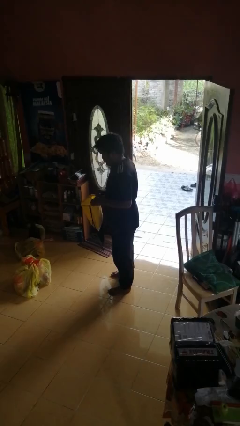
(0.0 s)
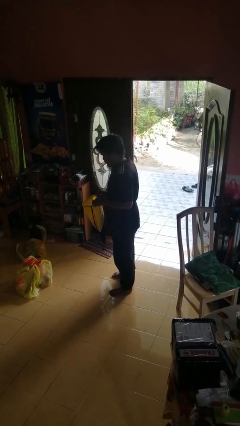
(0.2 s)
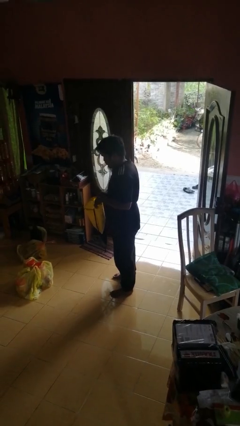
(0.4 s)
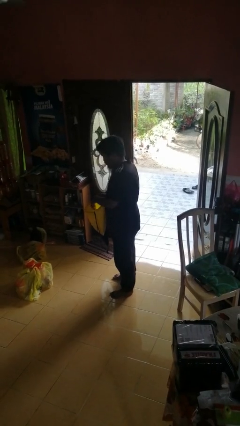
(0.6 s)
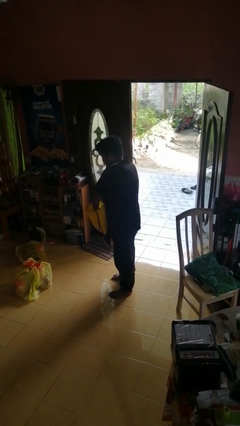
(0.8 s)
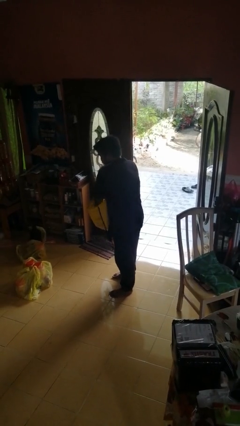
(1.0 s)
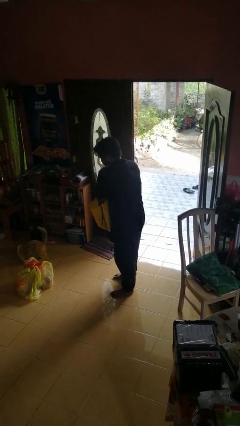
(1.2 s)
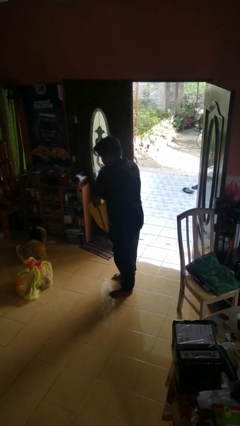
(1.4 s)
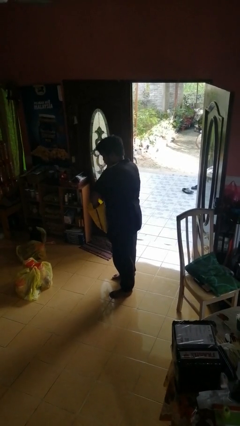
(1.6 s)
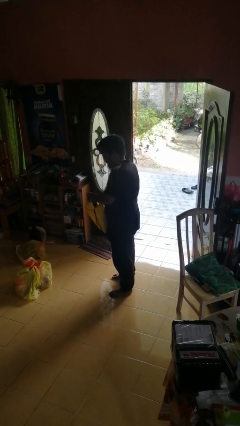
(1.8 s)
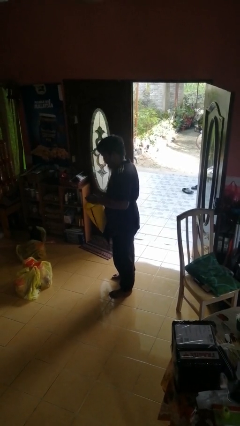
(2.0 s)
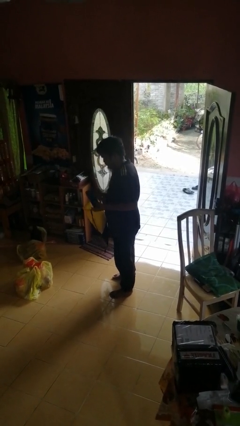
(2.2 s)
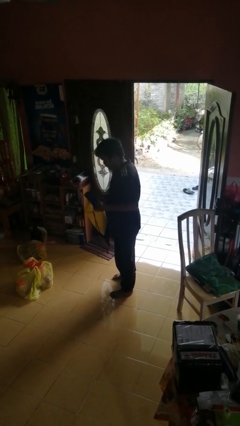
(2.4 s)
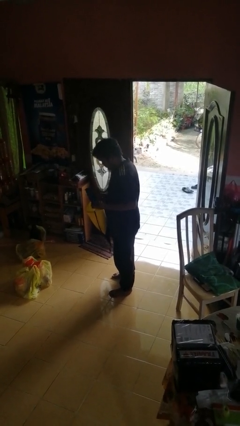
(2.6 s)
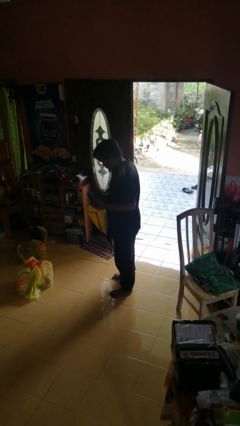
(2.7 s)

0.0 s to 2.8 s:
person takes object from bag

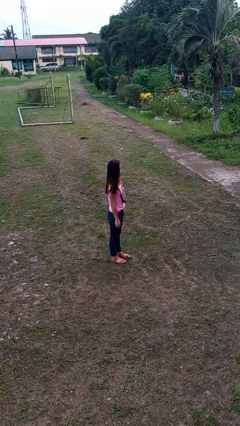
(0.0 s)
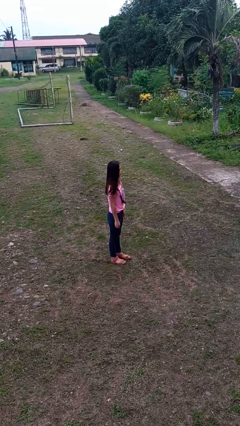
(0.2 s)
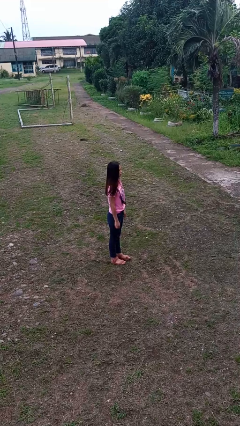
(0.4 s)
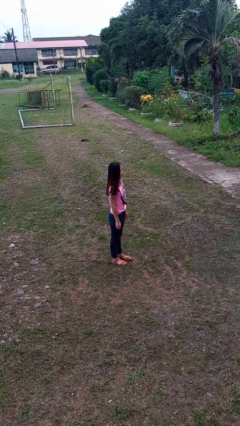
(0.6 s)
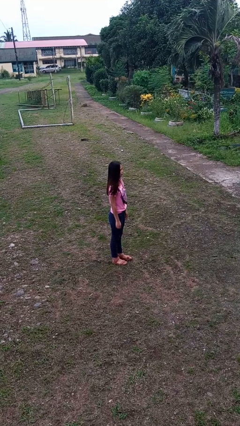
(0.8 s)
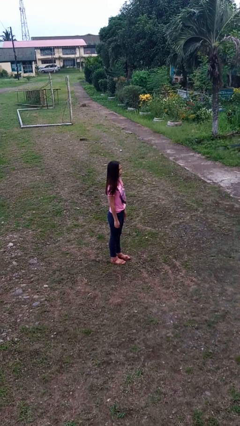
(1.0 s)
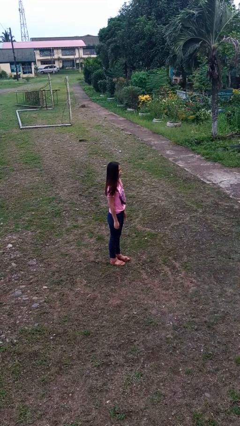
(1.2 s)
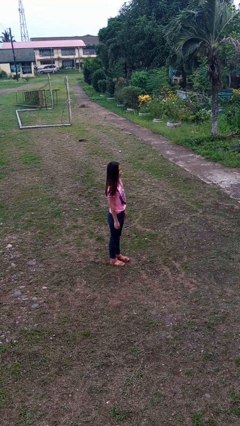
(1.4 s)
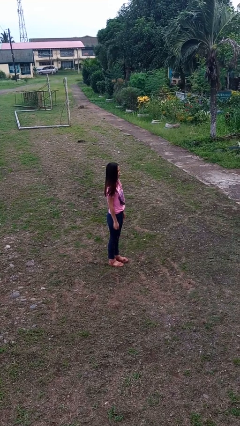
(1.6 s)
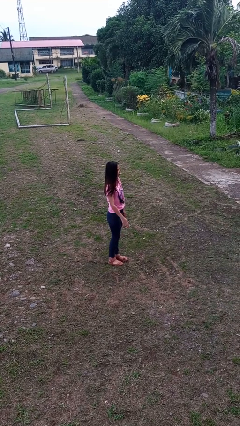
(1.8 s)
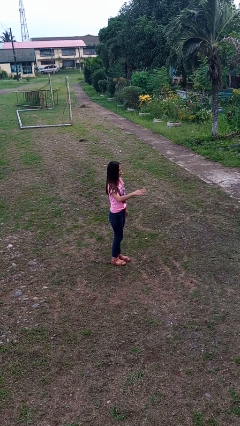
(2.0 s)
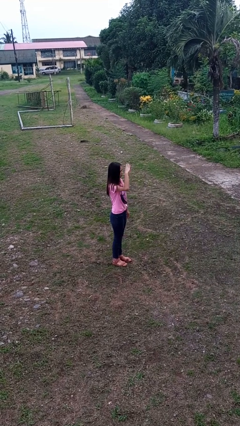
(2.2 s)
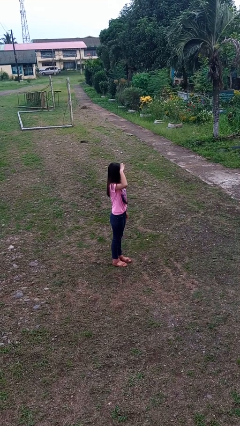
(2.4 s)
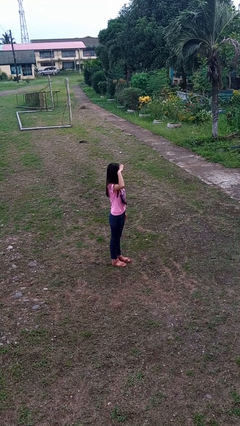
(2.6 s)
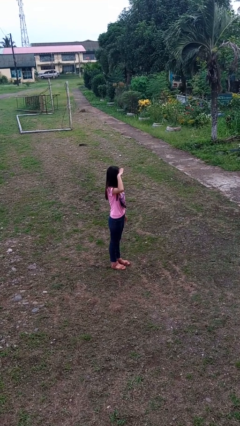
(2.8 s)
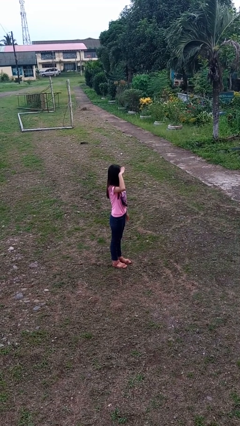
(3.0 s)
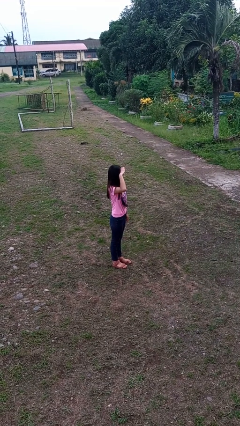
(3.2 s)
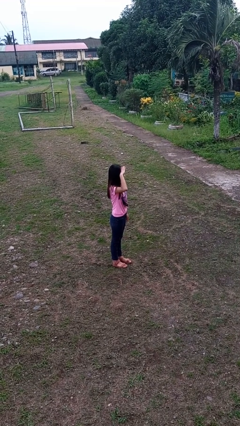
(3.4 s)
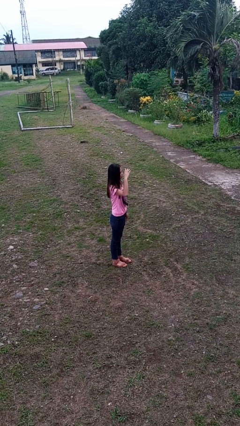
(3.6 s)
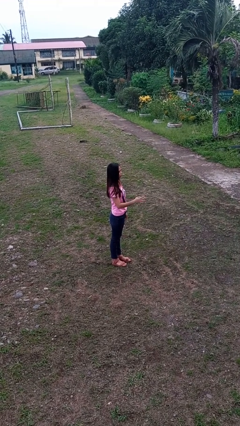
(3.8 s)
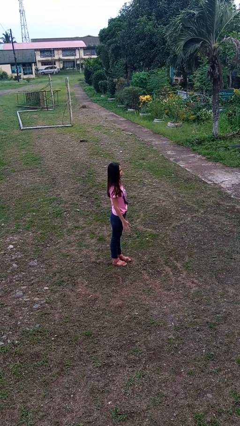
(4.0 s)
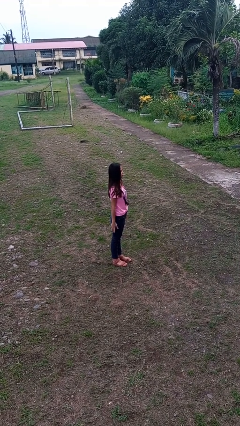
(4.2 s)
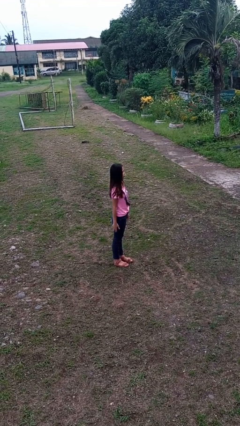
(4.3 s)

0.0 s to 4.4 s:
person salutes

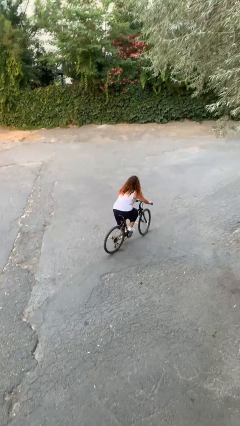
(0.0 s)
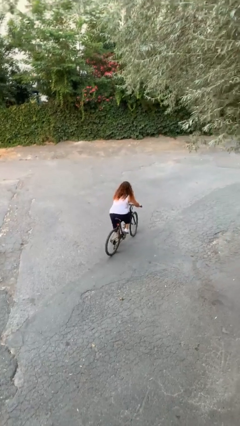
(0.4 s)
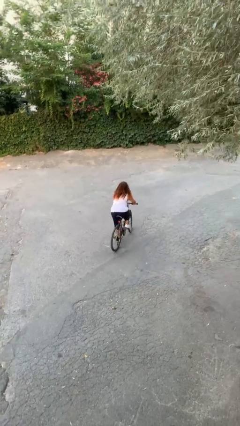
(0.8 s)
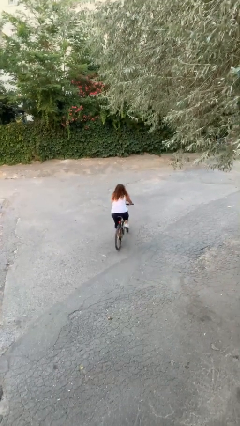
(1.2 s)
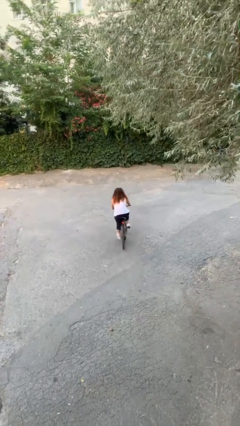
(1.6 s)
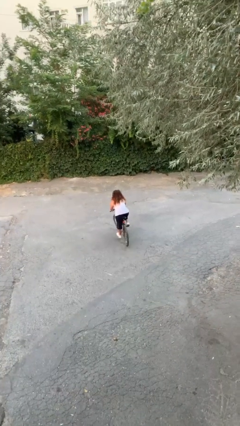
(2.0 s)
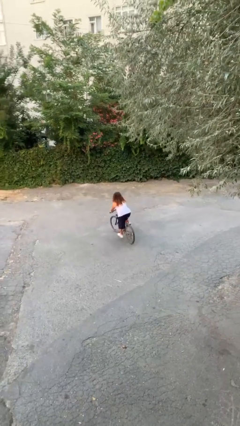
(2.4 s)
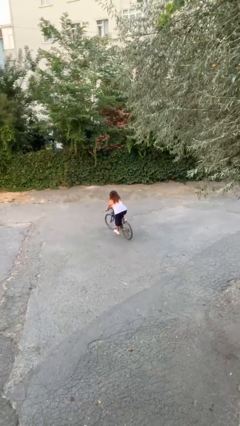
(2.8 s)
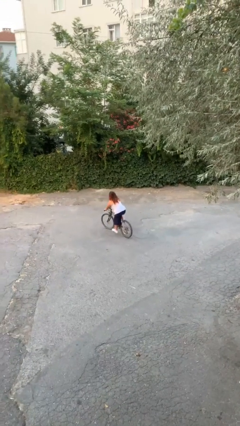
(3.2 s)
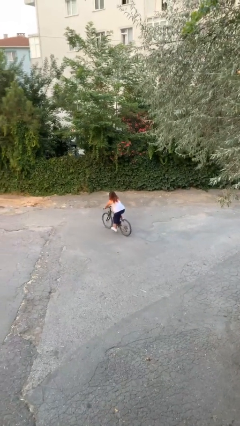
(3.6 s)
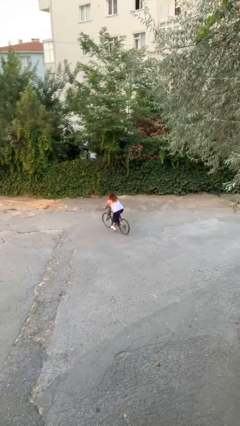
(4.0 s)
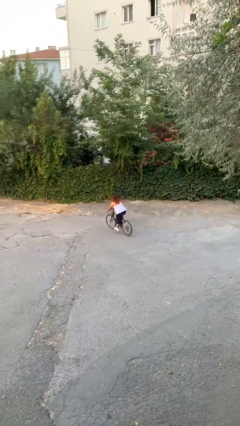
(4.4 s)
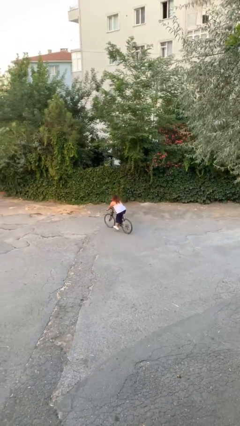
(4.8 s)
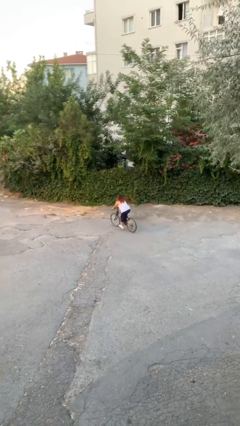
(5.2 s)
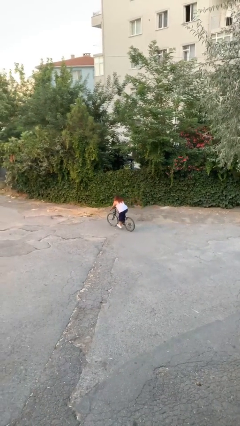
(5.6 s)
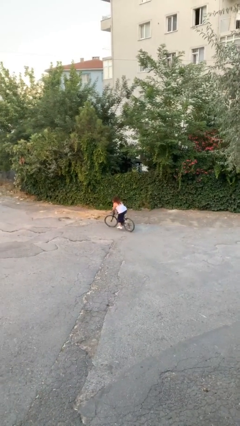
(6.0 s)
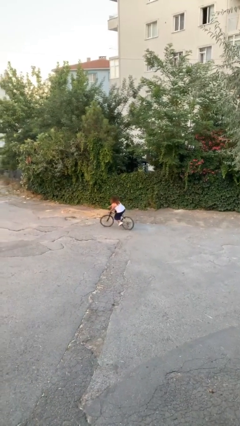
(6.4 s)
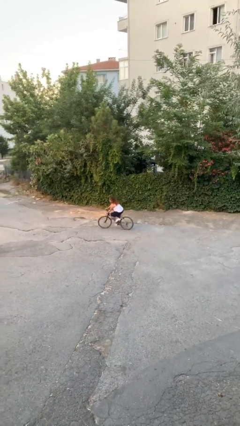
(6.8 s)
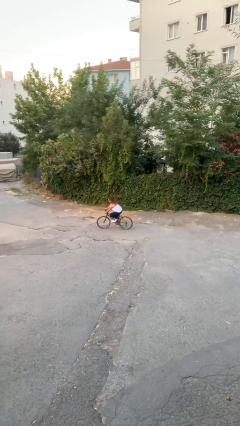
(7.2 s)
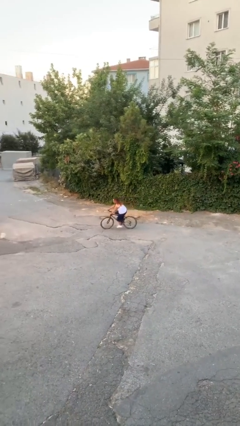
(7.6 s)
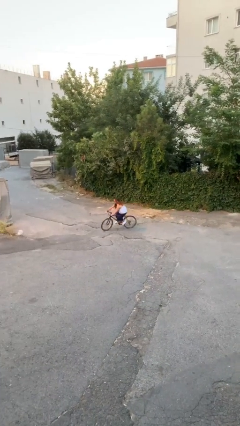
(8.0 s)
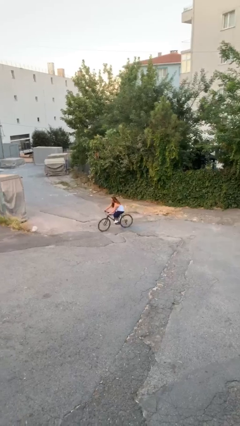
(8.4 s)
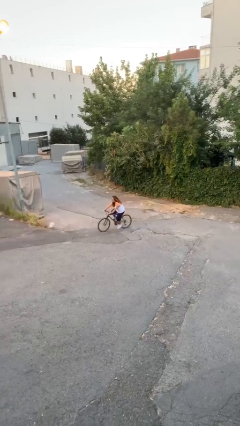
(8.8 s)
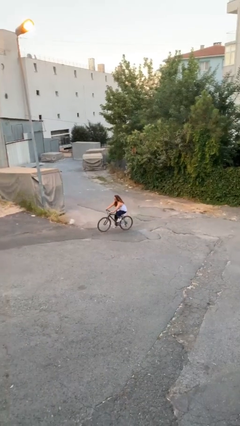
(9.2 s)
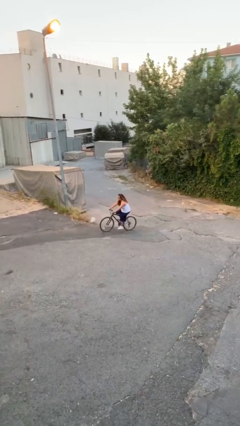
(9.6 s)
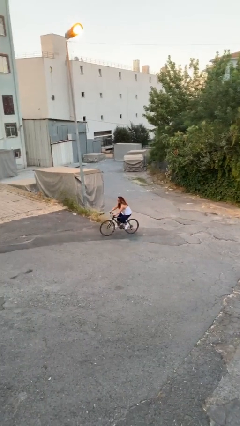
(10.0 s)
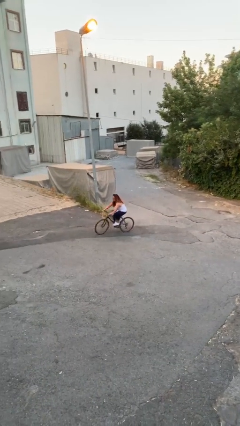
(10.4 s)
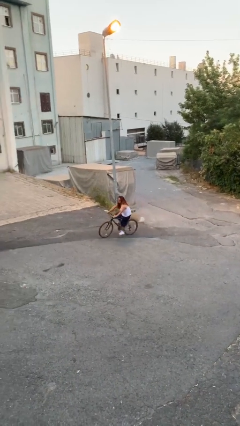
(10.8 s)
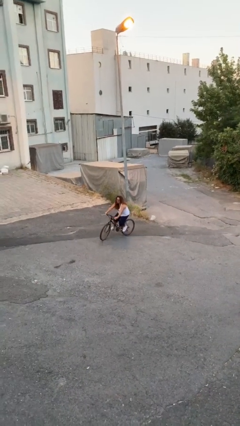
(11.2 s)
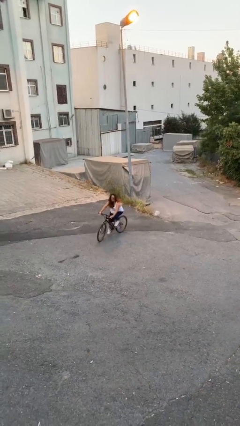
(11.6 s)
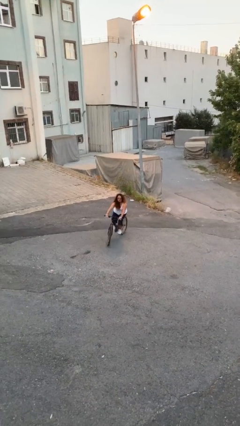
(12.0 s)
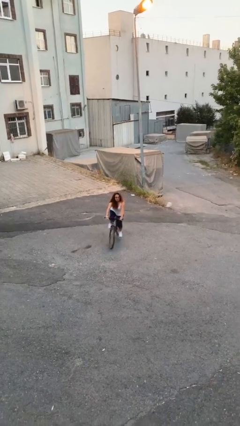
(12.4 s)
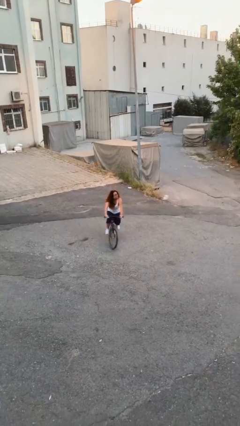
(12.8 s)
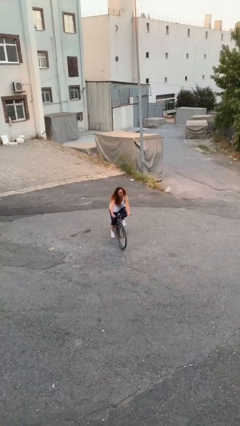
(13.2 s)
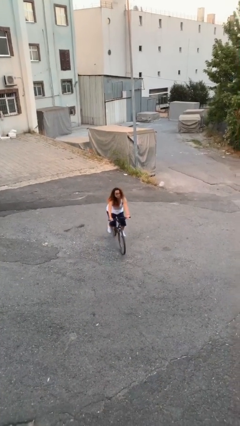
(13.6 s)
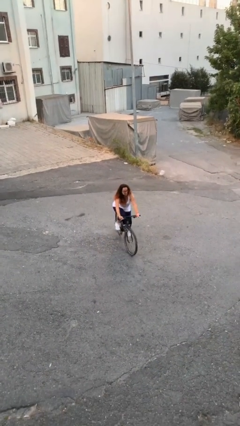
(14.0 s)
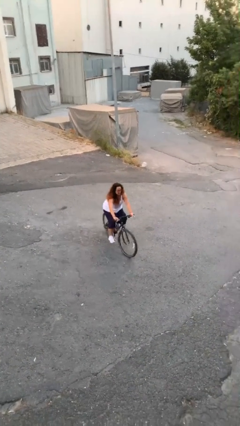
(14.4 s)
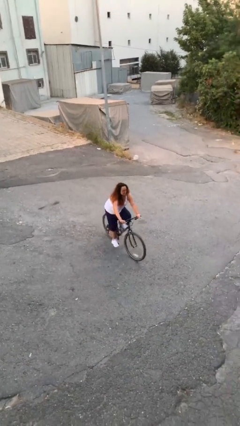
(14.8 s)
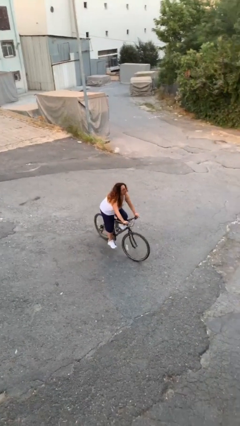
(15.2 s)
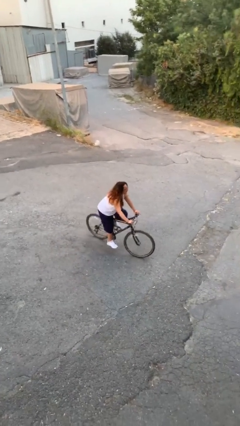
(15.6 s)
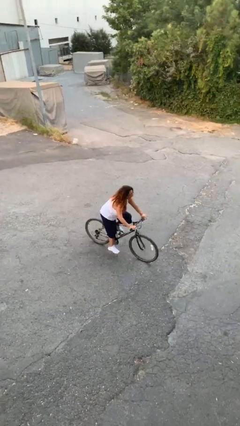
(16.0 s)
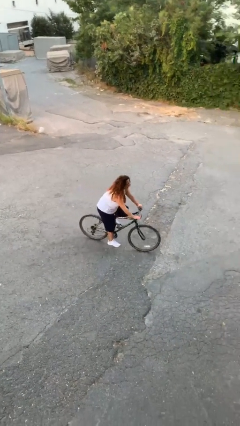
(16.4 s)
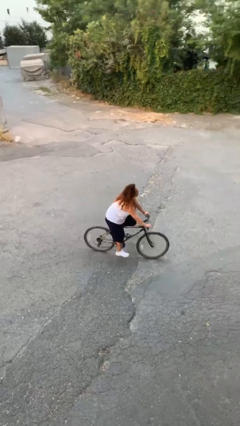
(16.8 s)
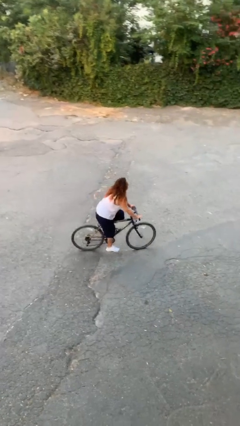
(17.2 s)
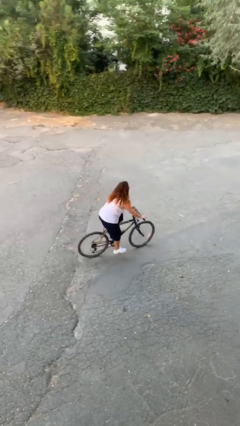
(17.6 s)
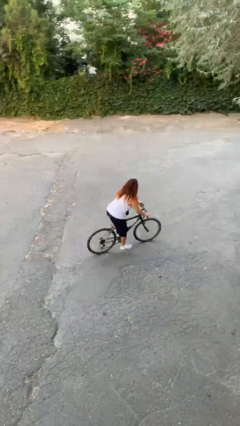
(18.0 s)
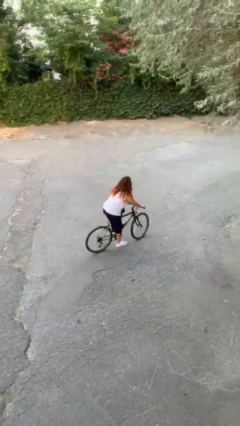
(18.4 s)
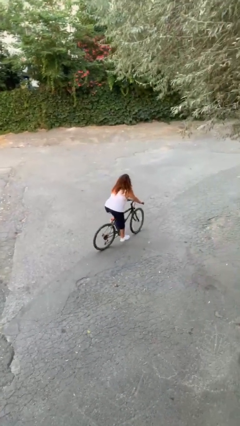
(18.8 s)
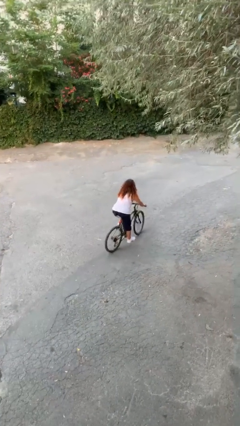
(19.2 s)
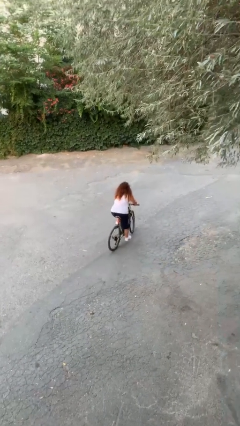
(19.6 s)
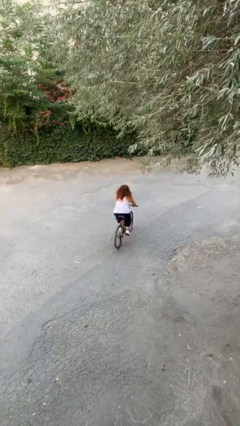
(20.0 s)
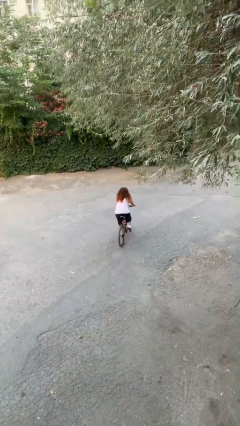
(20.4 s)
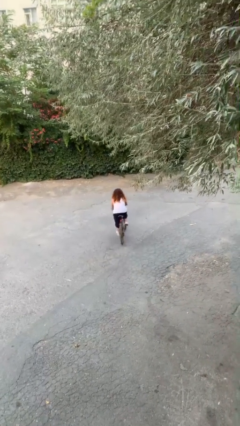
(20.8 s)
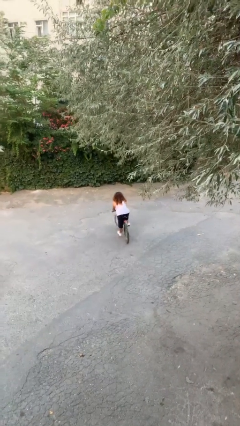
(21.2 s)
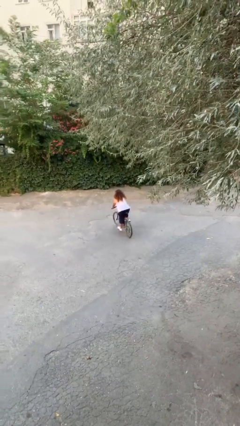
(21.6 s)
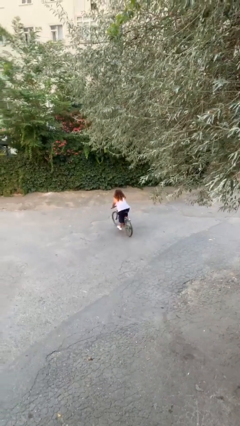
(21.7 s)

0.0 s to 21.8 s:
person rides bicycle
